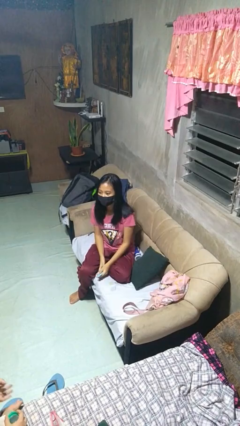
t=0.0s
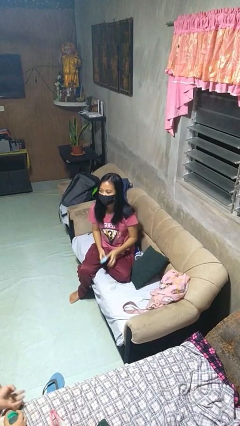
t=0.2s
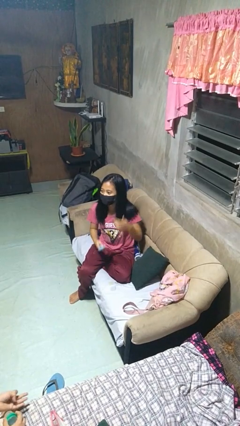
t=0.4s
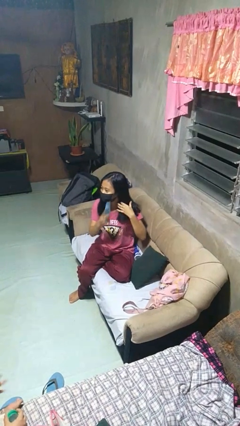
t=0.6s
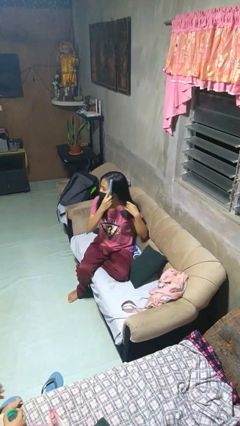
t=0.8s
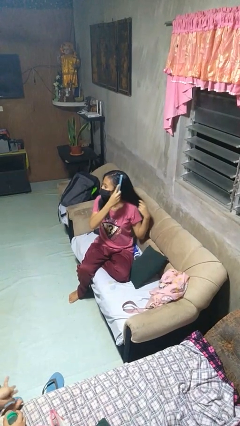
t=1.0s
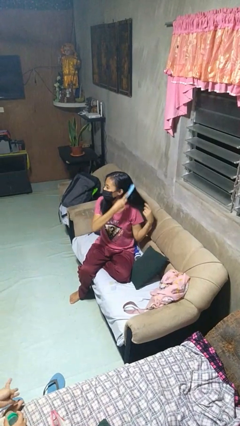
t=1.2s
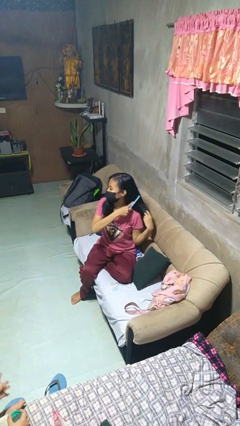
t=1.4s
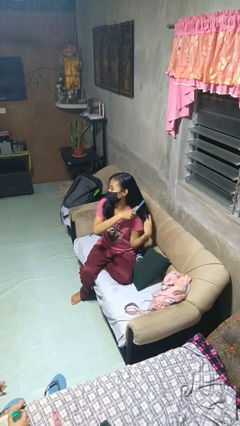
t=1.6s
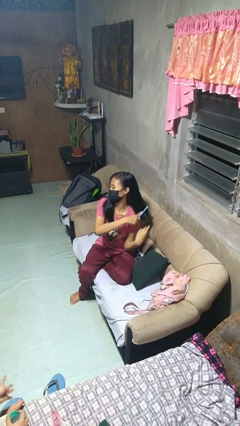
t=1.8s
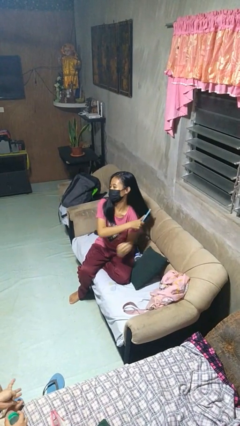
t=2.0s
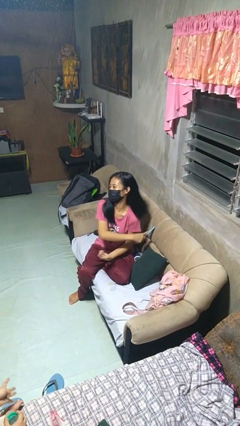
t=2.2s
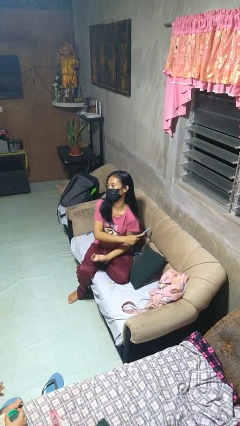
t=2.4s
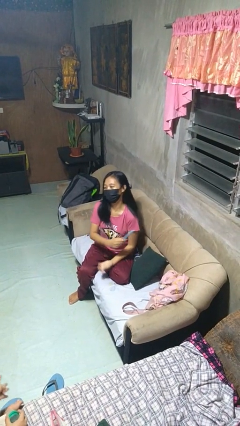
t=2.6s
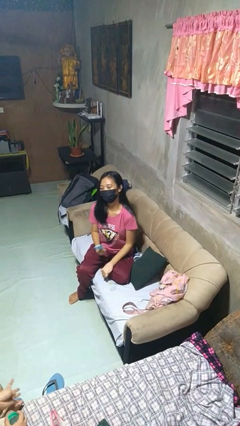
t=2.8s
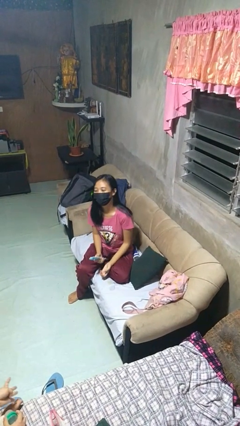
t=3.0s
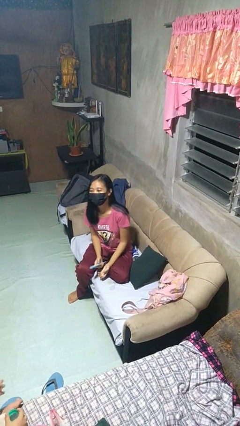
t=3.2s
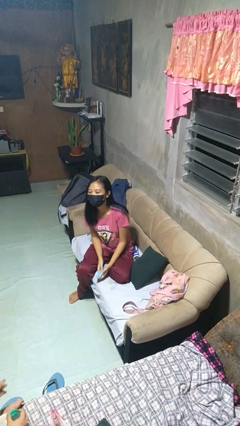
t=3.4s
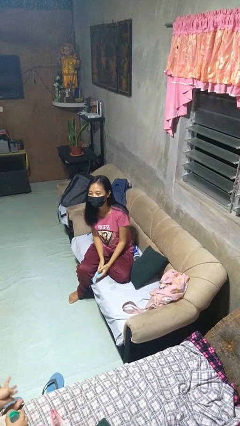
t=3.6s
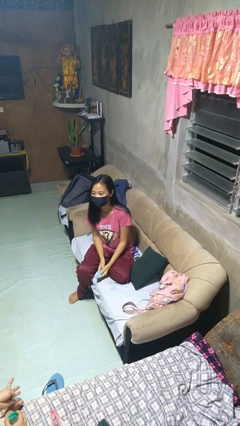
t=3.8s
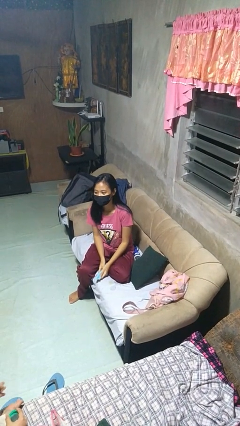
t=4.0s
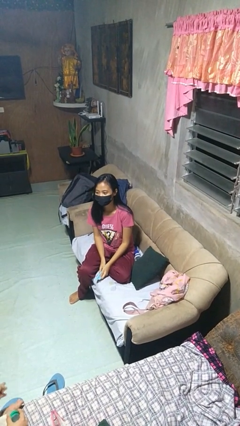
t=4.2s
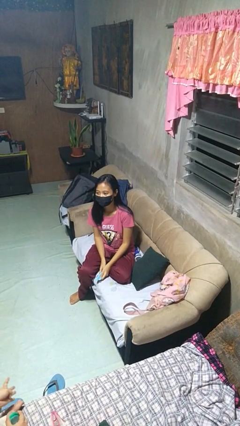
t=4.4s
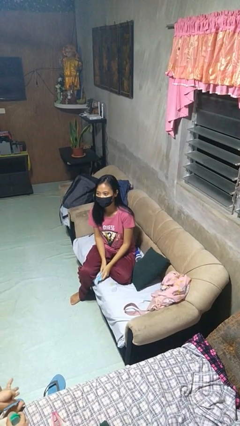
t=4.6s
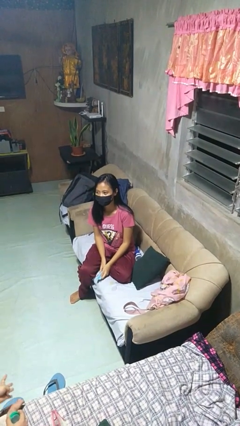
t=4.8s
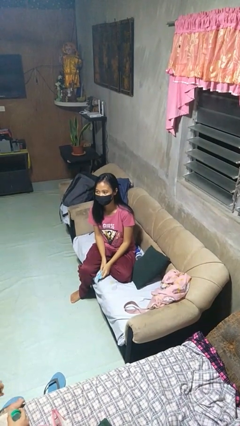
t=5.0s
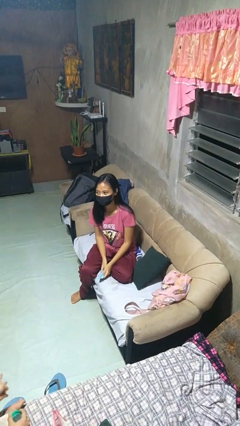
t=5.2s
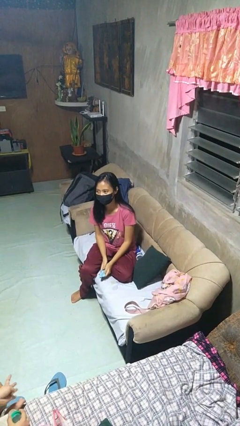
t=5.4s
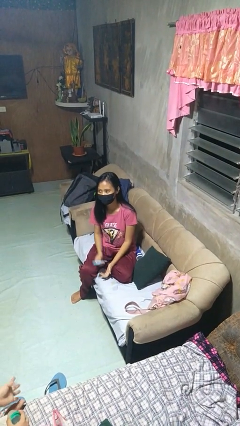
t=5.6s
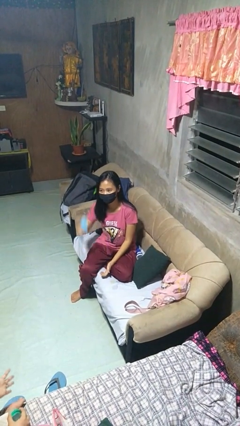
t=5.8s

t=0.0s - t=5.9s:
person brushes hair

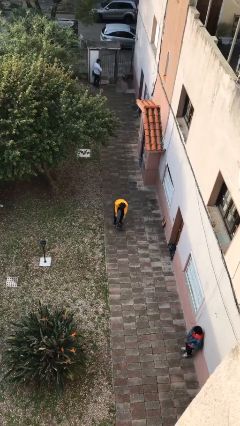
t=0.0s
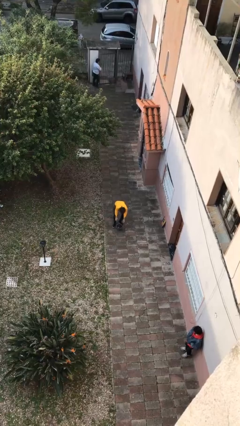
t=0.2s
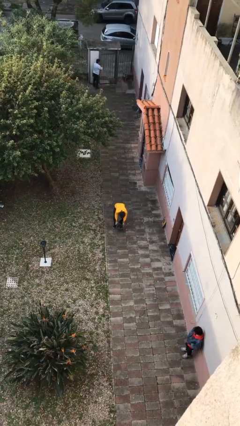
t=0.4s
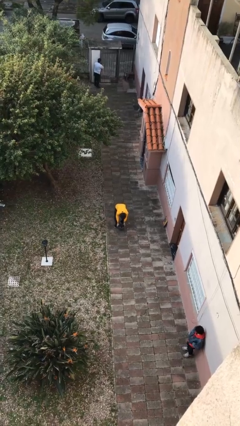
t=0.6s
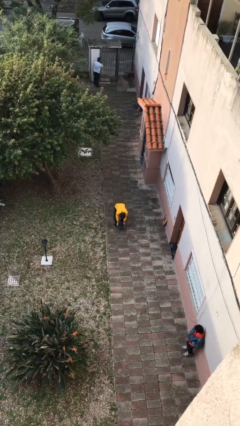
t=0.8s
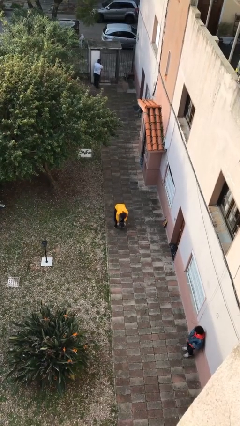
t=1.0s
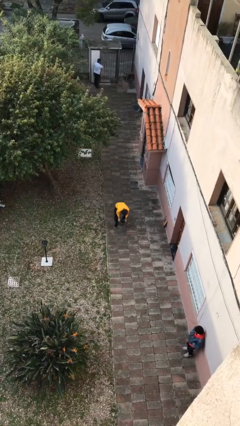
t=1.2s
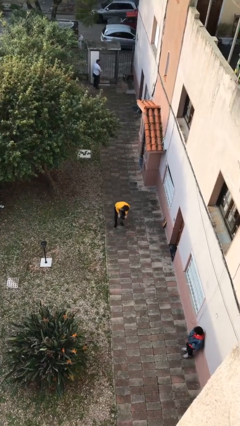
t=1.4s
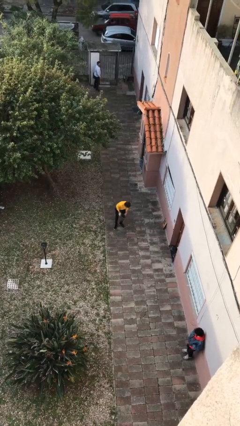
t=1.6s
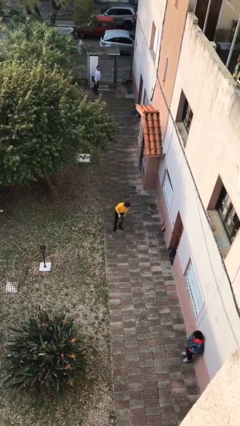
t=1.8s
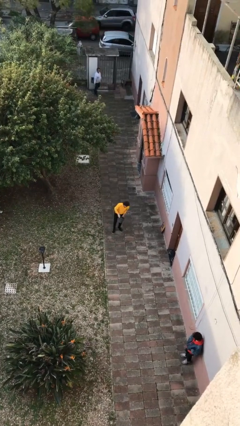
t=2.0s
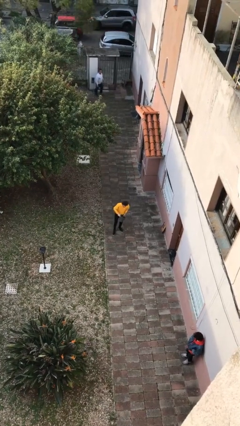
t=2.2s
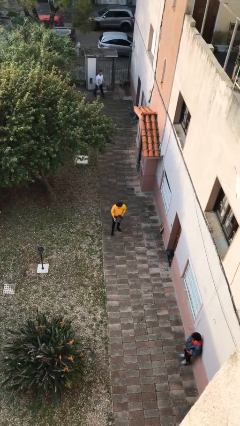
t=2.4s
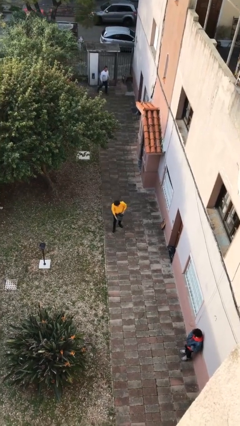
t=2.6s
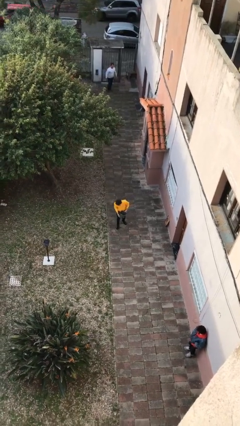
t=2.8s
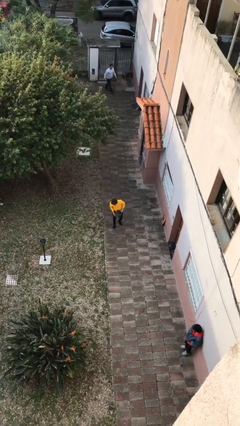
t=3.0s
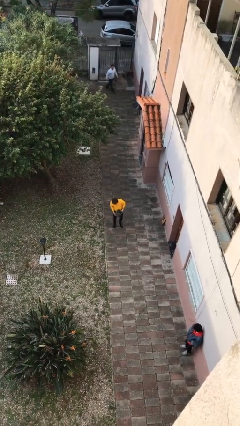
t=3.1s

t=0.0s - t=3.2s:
person picks up object from floor

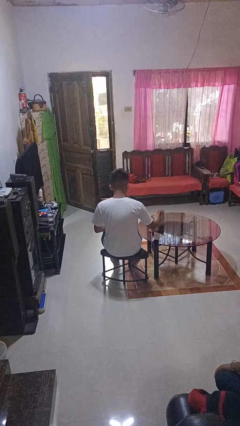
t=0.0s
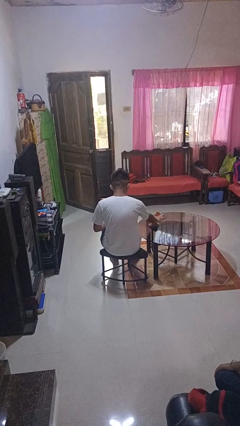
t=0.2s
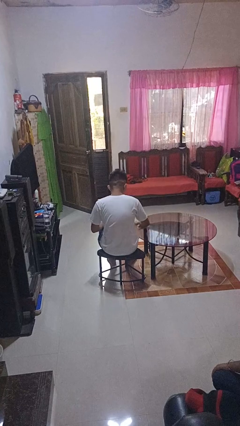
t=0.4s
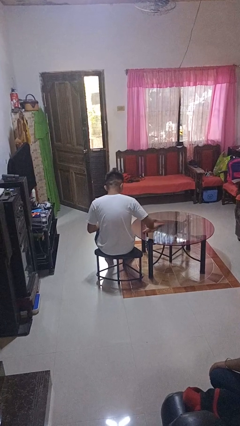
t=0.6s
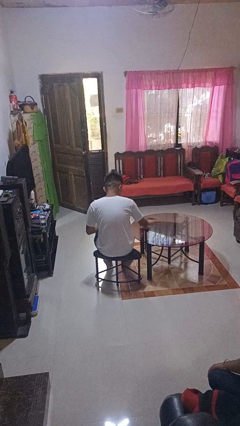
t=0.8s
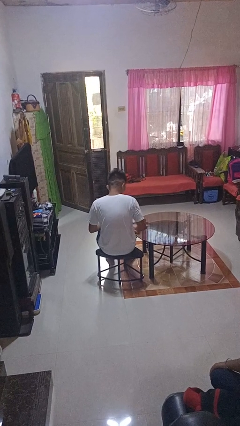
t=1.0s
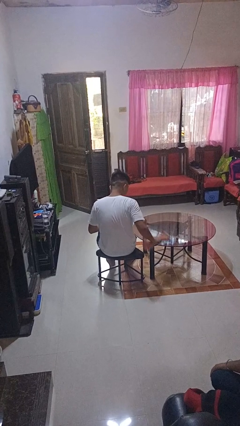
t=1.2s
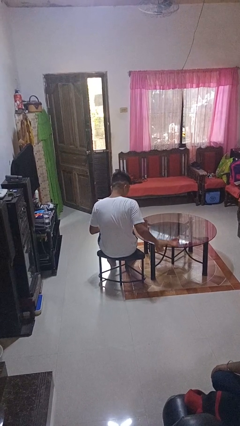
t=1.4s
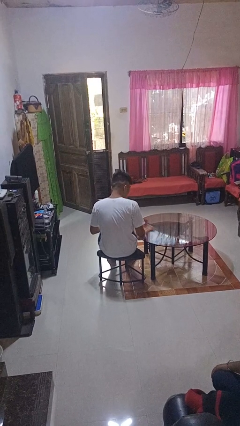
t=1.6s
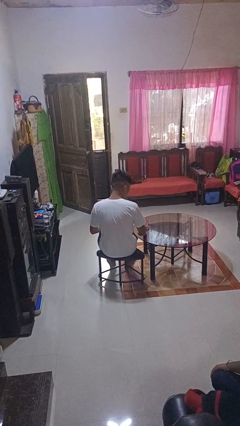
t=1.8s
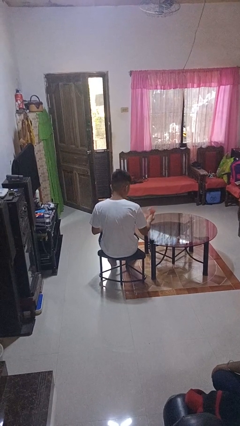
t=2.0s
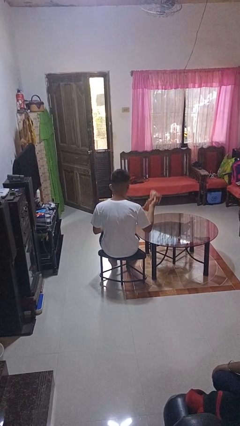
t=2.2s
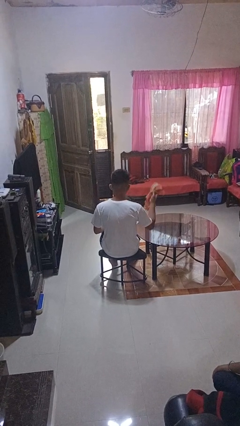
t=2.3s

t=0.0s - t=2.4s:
person cleans table with rag

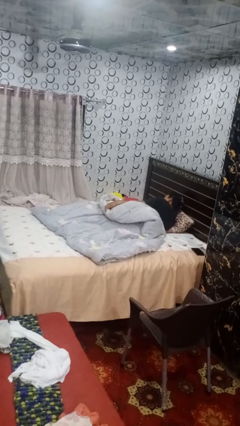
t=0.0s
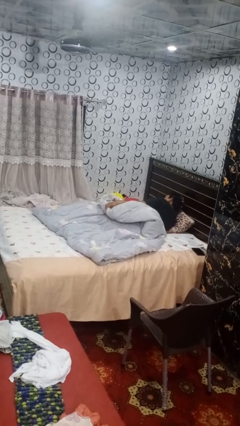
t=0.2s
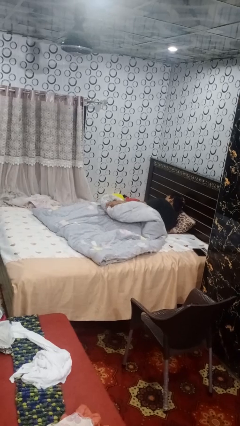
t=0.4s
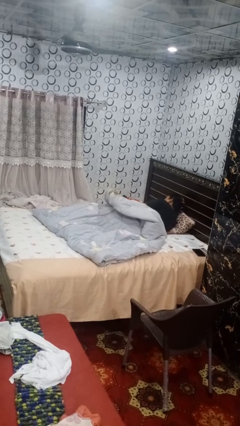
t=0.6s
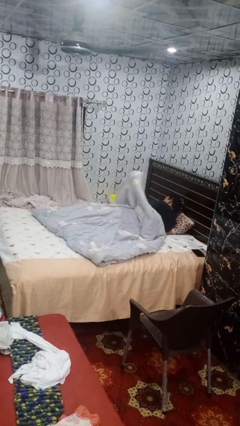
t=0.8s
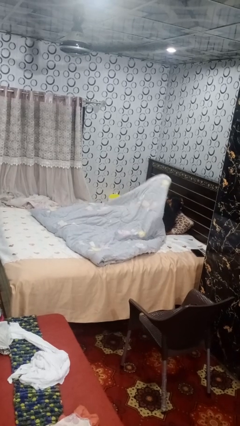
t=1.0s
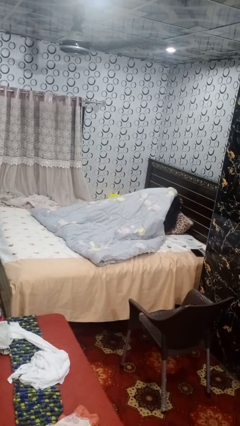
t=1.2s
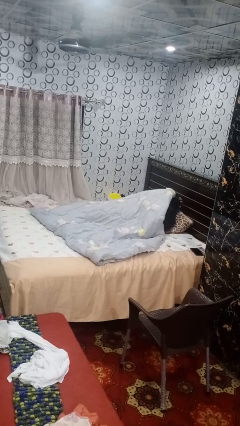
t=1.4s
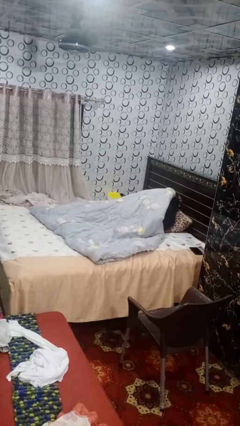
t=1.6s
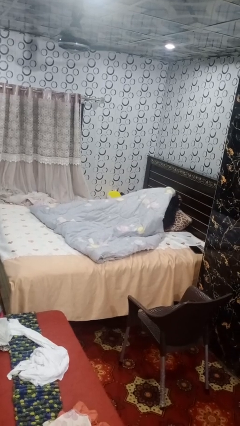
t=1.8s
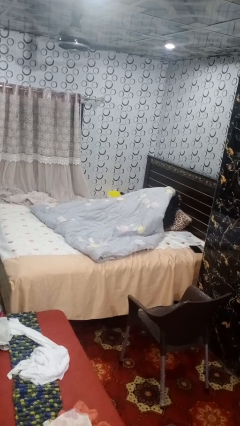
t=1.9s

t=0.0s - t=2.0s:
person covers with blanket

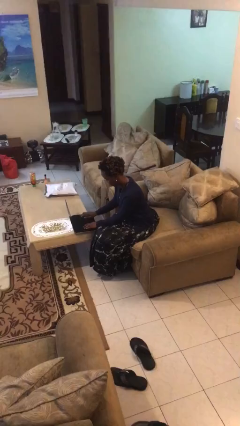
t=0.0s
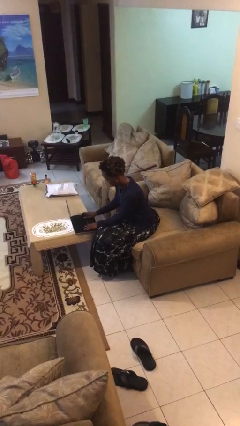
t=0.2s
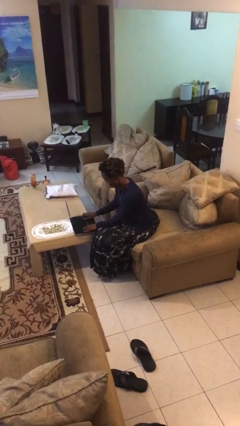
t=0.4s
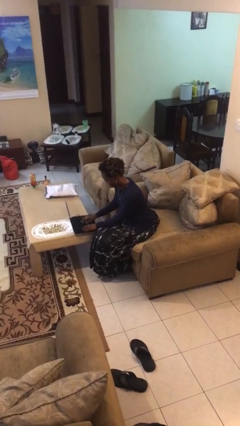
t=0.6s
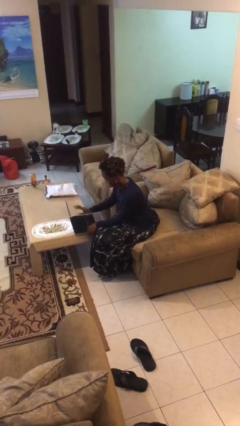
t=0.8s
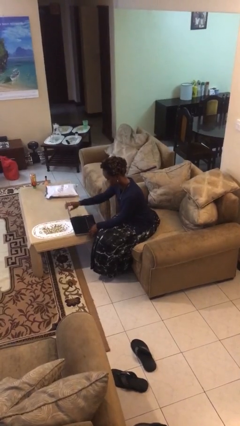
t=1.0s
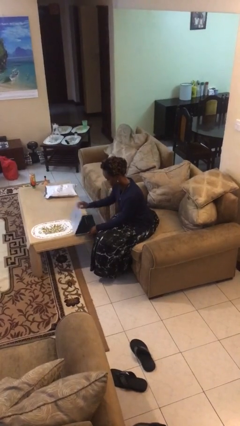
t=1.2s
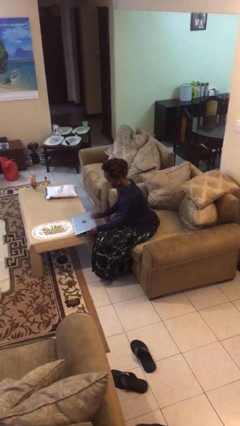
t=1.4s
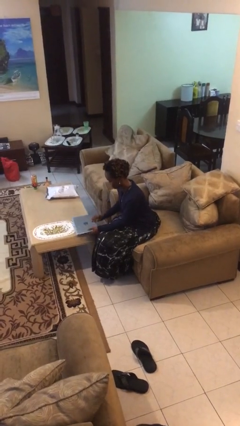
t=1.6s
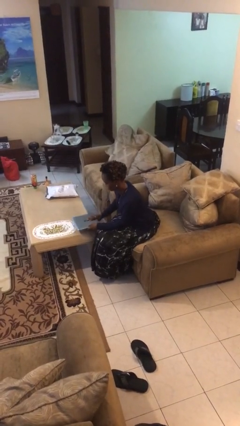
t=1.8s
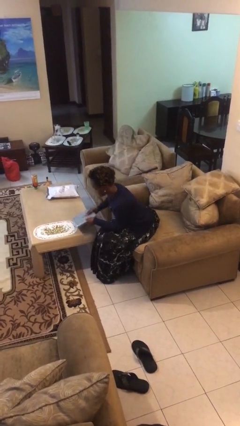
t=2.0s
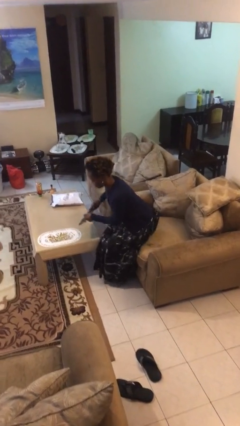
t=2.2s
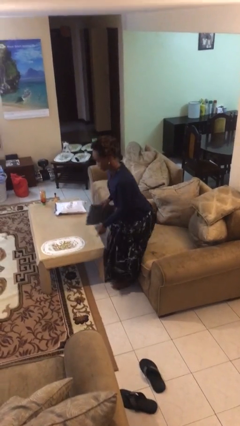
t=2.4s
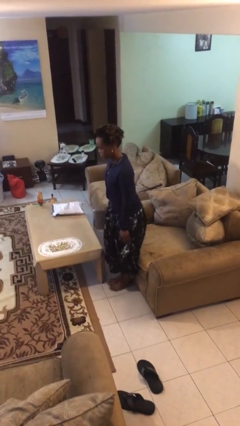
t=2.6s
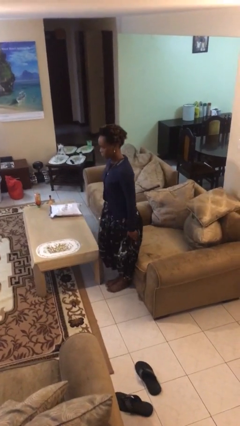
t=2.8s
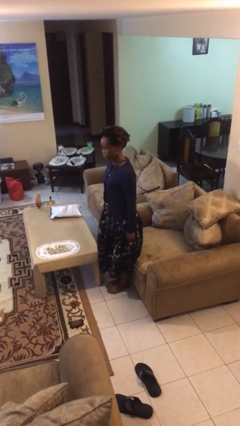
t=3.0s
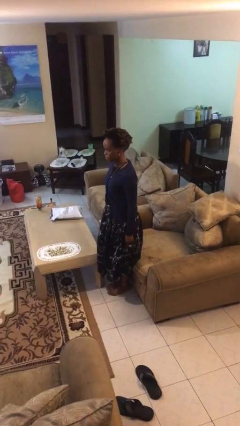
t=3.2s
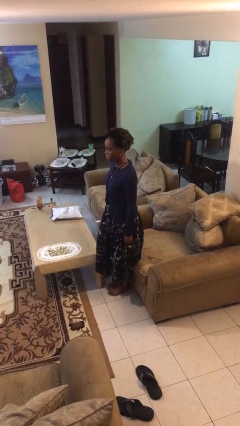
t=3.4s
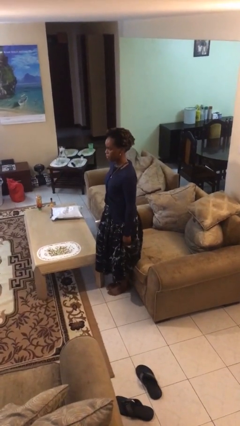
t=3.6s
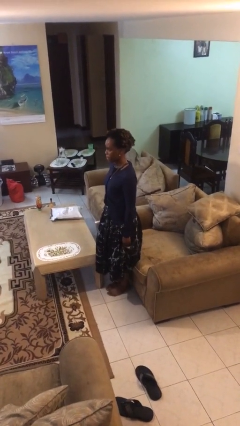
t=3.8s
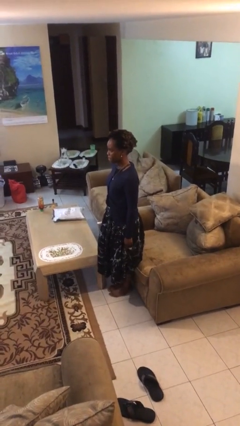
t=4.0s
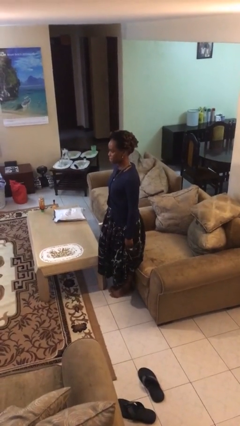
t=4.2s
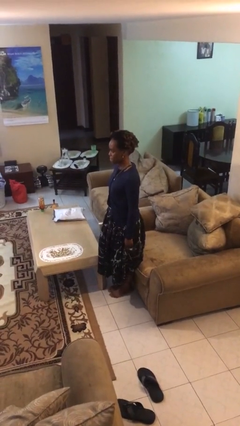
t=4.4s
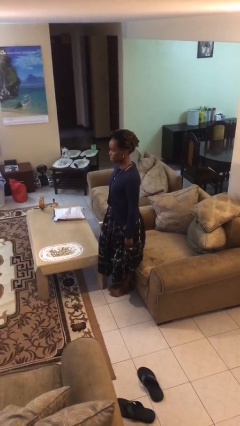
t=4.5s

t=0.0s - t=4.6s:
person stands up
